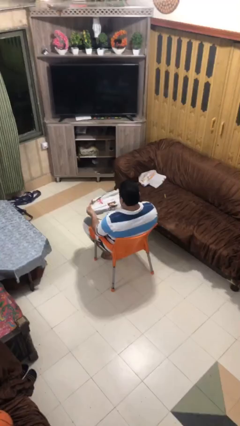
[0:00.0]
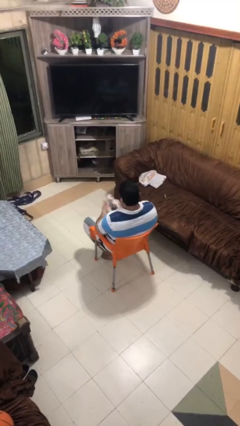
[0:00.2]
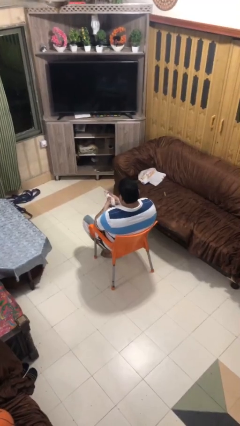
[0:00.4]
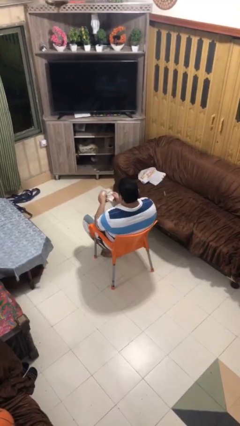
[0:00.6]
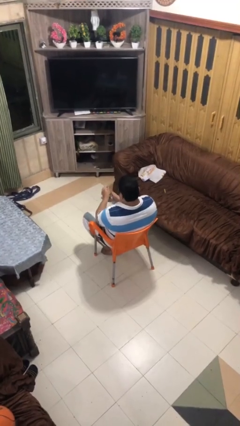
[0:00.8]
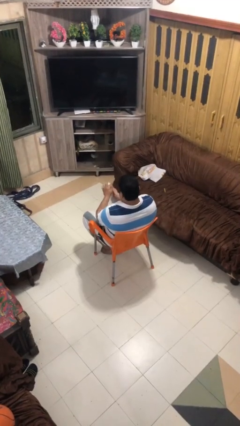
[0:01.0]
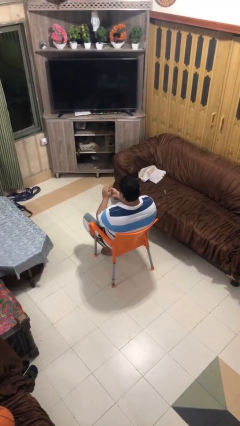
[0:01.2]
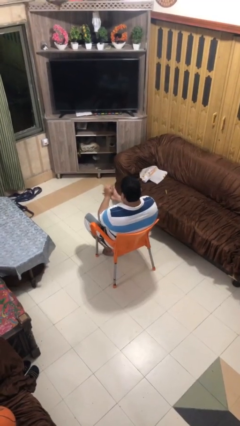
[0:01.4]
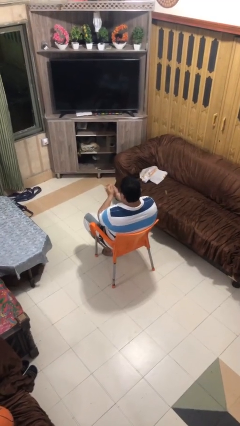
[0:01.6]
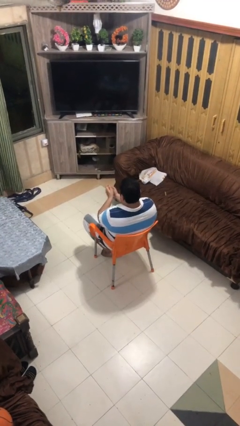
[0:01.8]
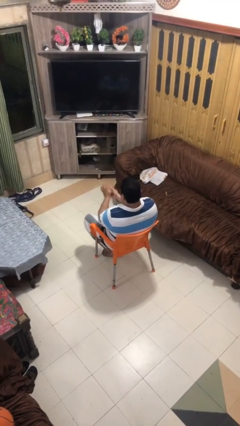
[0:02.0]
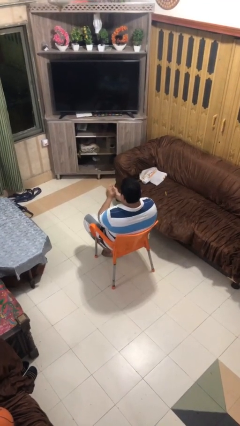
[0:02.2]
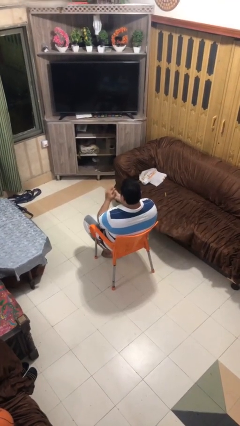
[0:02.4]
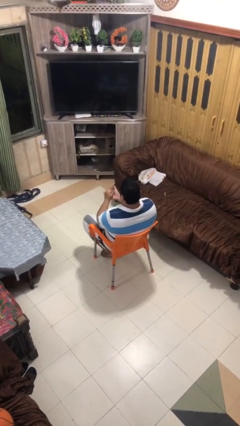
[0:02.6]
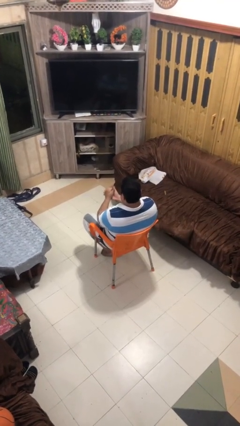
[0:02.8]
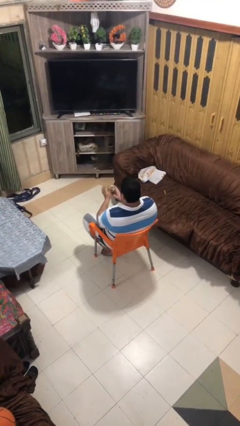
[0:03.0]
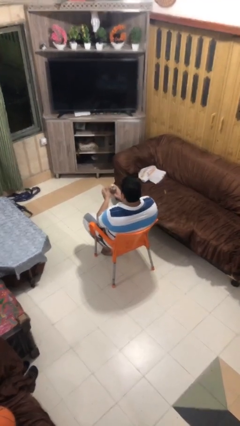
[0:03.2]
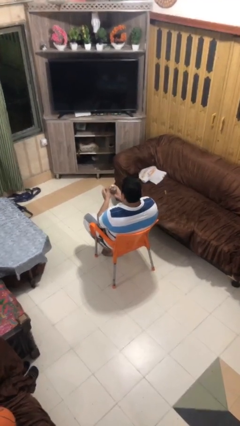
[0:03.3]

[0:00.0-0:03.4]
person crumples paper

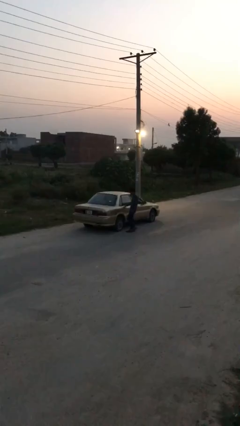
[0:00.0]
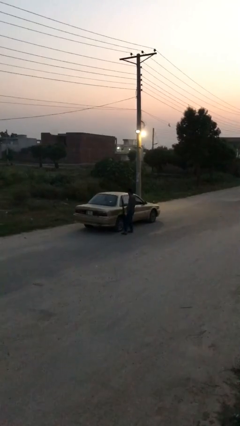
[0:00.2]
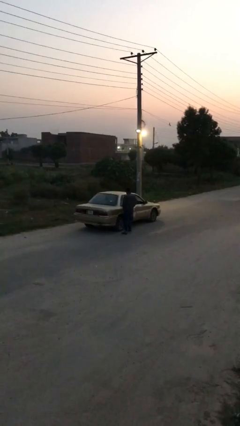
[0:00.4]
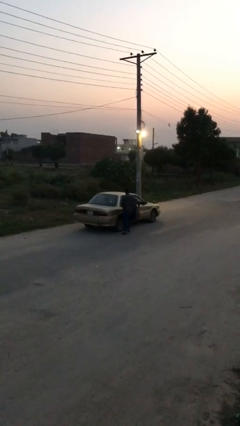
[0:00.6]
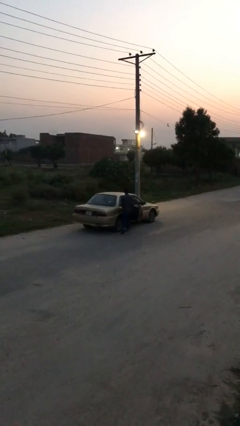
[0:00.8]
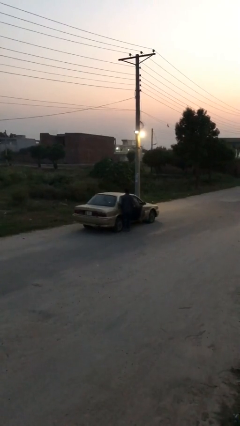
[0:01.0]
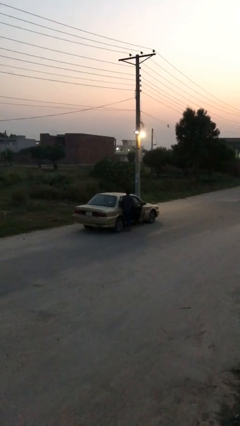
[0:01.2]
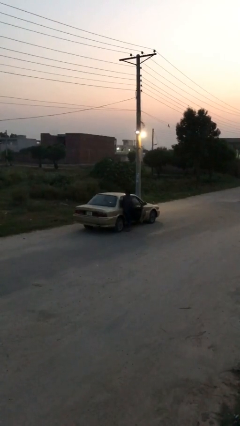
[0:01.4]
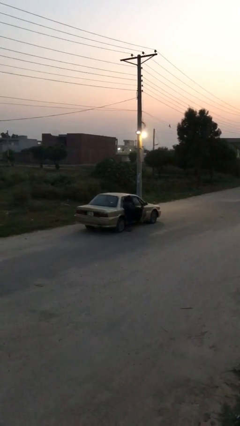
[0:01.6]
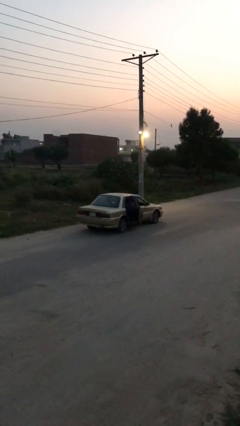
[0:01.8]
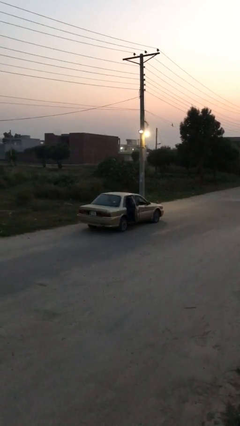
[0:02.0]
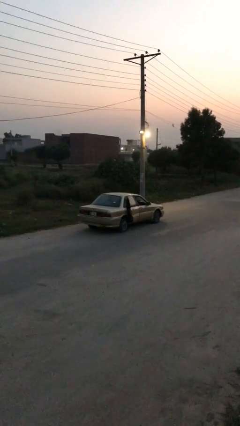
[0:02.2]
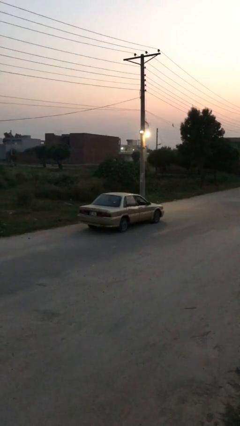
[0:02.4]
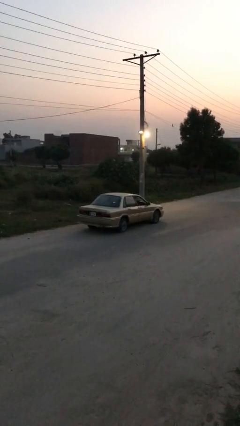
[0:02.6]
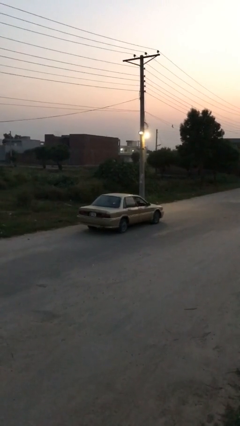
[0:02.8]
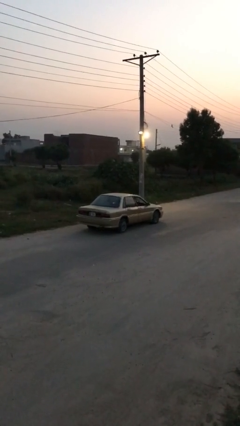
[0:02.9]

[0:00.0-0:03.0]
car picks up person

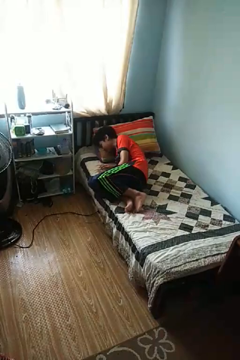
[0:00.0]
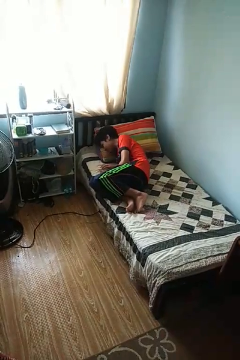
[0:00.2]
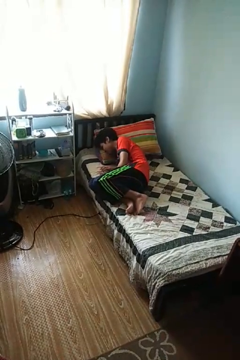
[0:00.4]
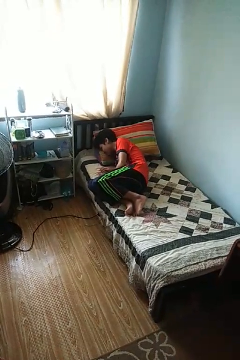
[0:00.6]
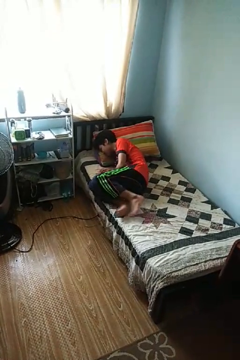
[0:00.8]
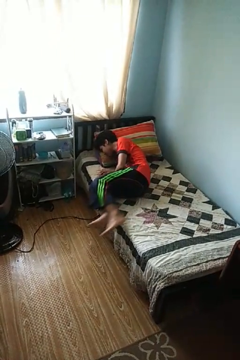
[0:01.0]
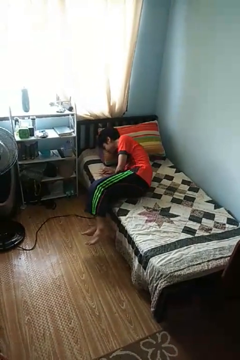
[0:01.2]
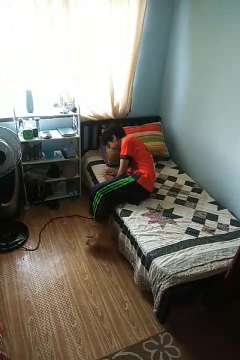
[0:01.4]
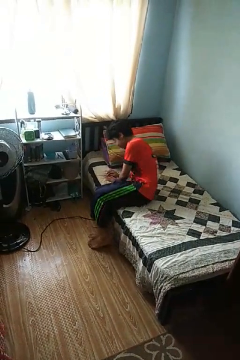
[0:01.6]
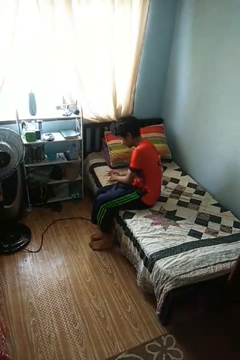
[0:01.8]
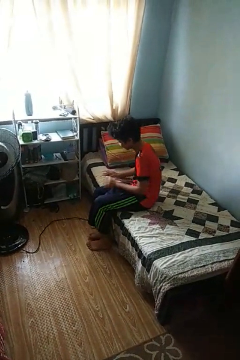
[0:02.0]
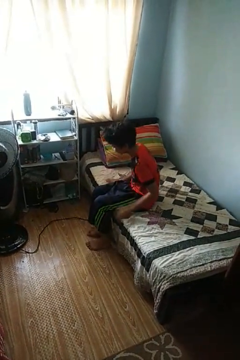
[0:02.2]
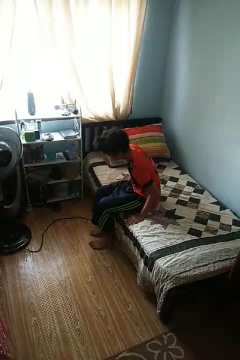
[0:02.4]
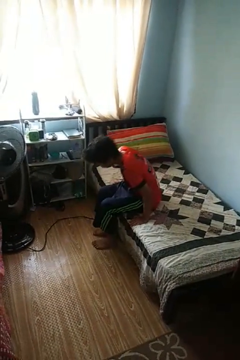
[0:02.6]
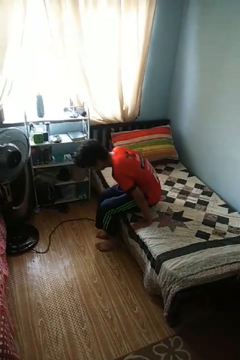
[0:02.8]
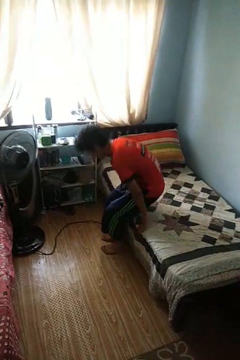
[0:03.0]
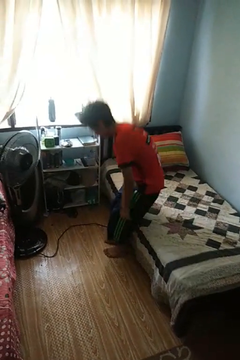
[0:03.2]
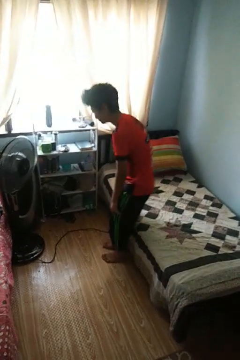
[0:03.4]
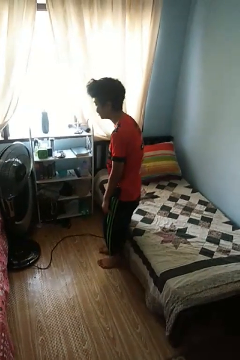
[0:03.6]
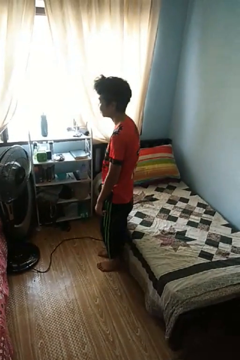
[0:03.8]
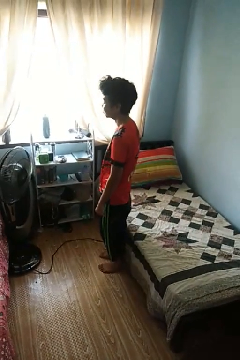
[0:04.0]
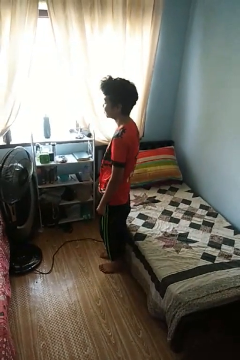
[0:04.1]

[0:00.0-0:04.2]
person stands up

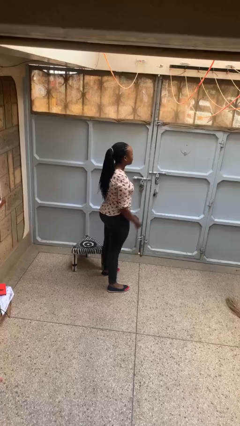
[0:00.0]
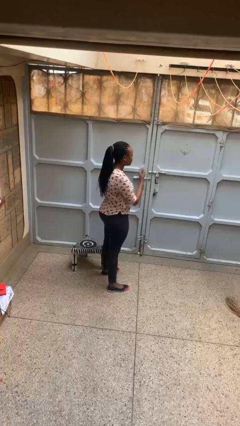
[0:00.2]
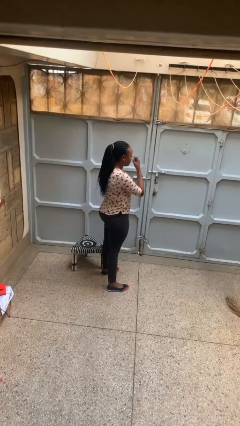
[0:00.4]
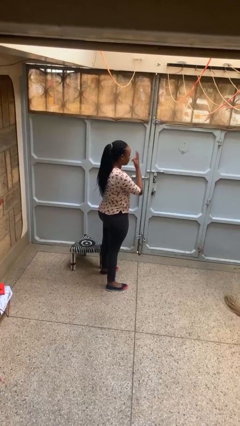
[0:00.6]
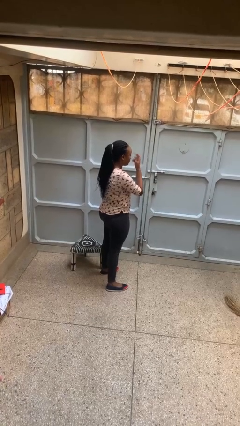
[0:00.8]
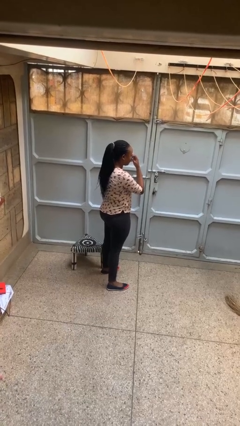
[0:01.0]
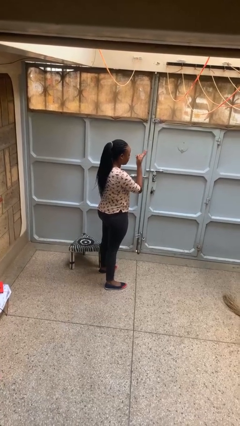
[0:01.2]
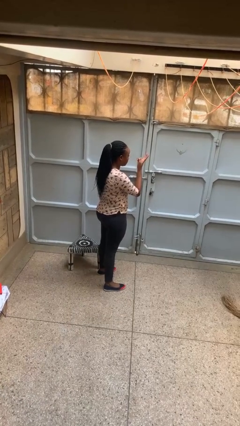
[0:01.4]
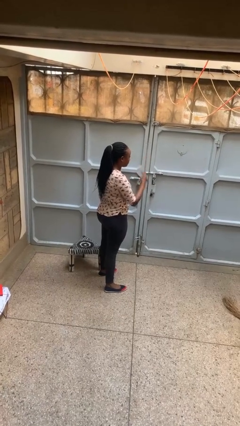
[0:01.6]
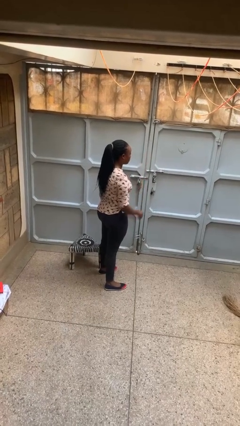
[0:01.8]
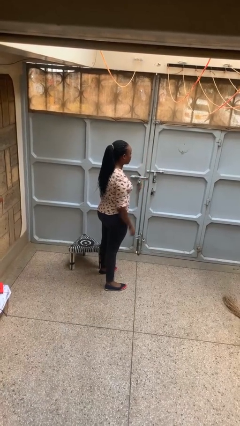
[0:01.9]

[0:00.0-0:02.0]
person gestures watch closely

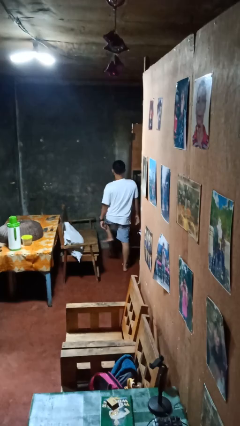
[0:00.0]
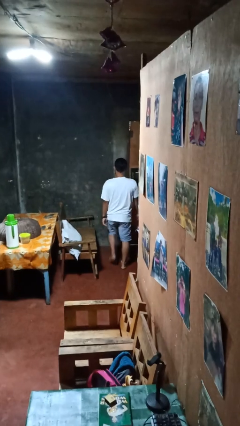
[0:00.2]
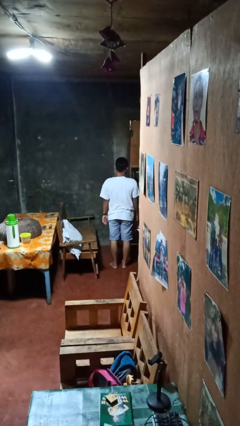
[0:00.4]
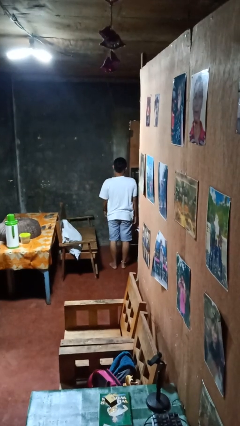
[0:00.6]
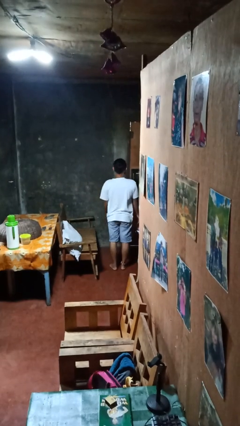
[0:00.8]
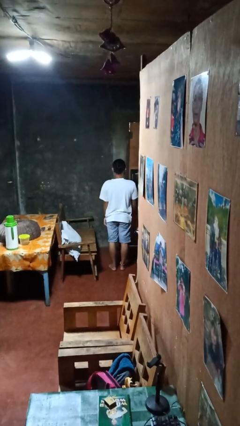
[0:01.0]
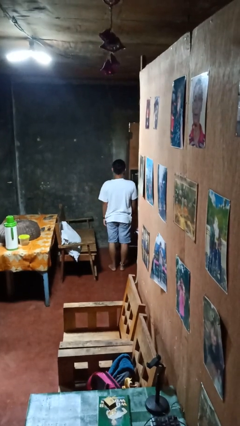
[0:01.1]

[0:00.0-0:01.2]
person climbs off couch

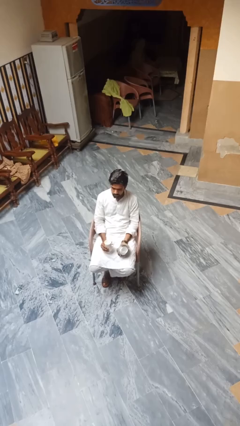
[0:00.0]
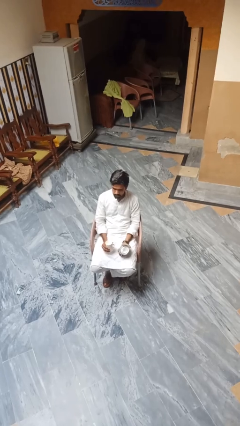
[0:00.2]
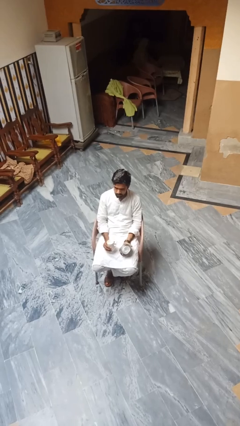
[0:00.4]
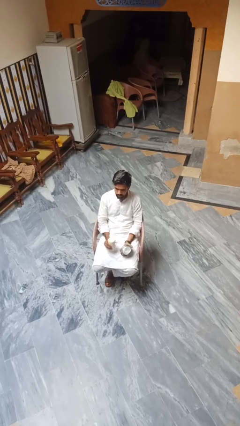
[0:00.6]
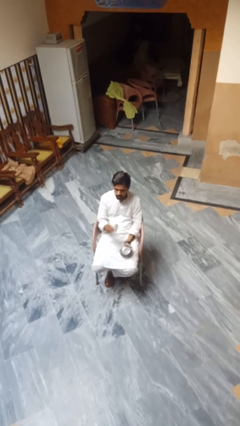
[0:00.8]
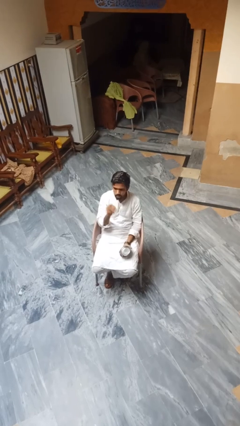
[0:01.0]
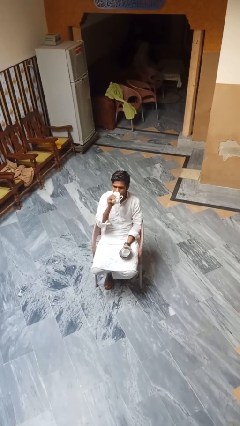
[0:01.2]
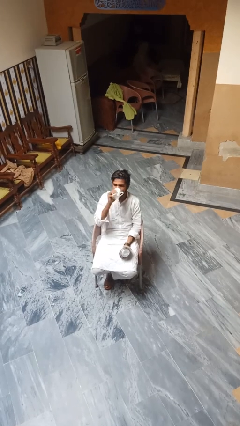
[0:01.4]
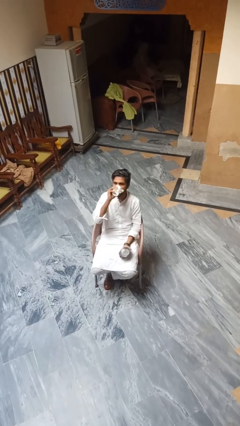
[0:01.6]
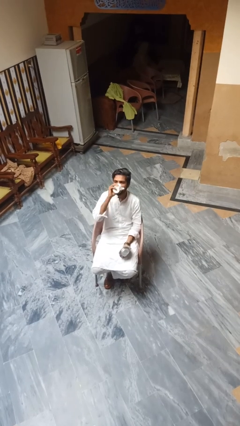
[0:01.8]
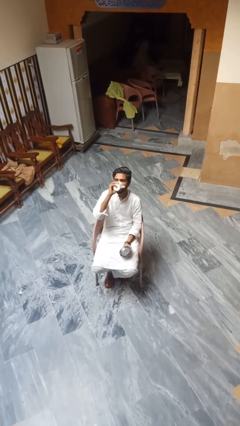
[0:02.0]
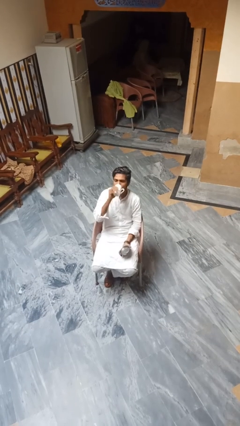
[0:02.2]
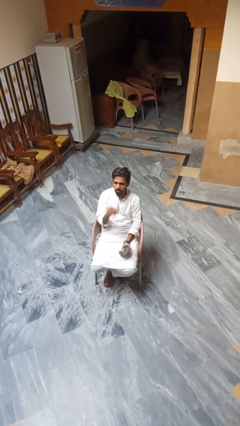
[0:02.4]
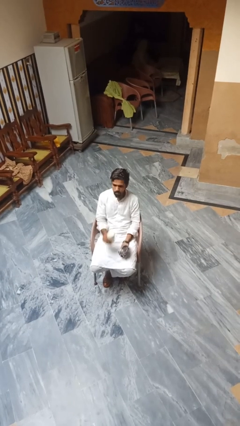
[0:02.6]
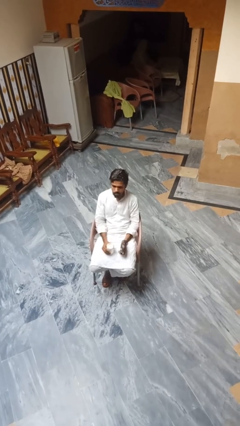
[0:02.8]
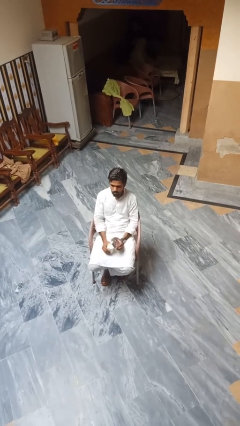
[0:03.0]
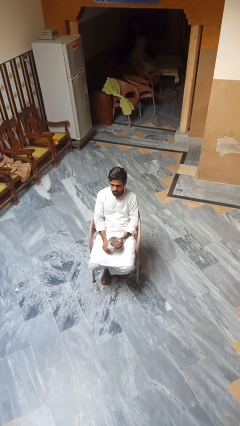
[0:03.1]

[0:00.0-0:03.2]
person drinks from beverage can

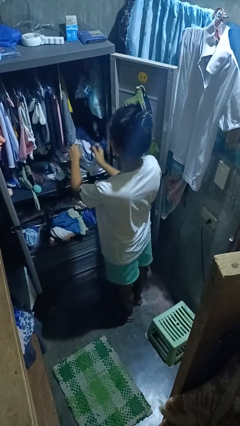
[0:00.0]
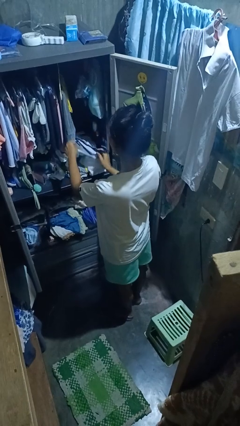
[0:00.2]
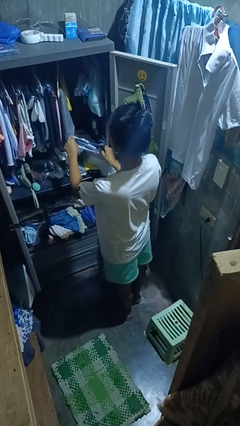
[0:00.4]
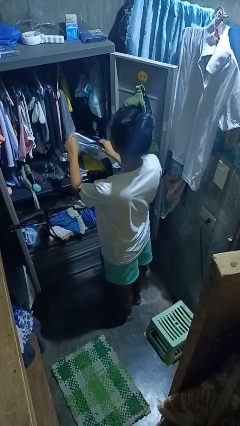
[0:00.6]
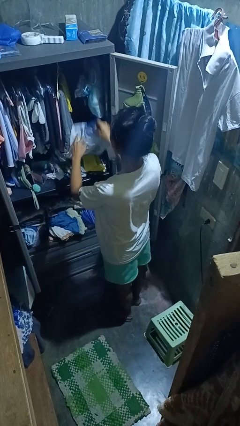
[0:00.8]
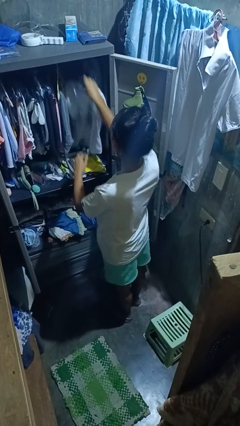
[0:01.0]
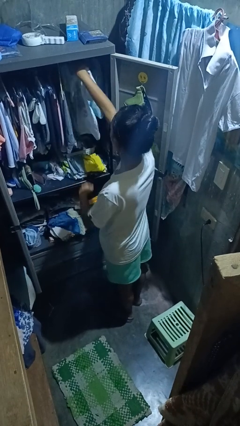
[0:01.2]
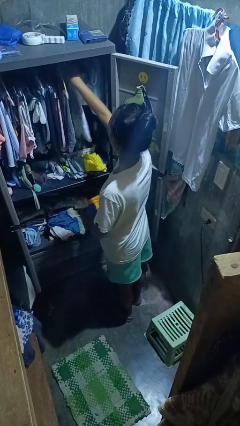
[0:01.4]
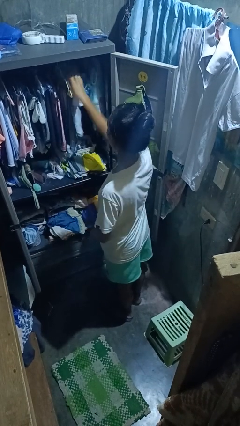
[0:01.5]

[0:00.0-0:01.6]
person puts clothes into closet
